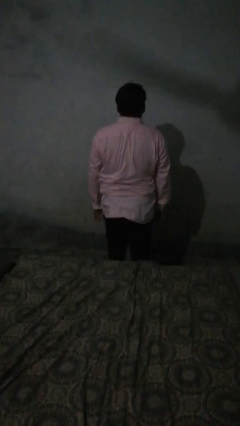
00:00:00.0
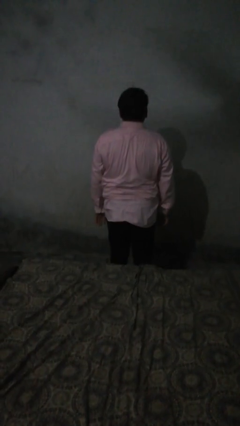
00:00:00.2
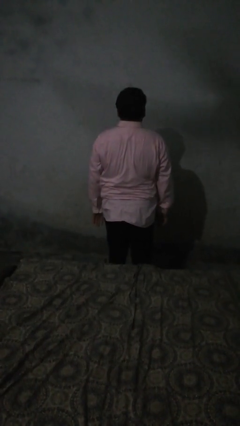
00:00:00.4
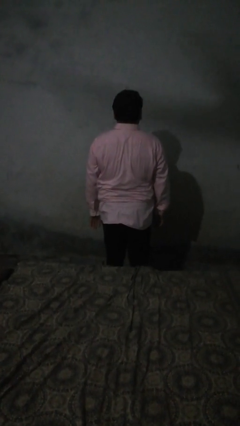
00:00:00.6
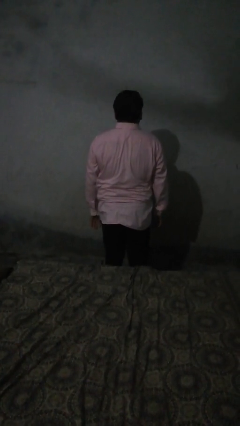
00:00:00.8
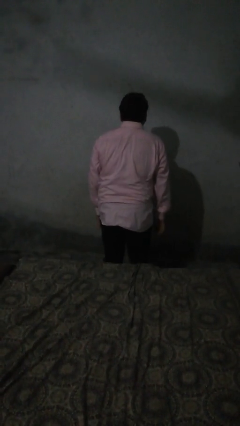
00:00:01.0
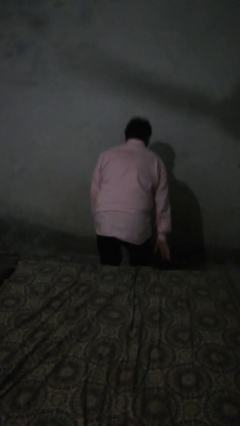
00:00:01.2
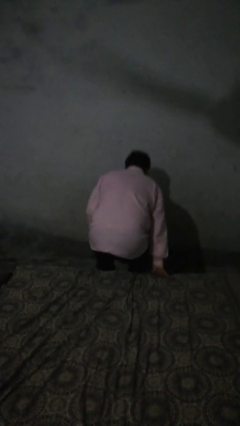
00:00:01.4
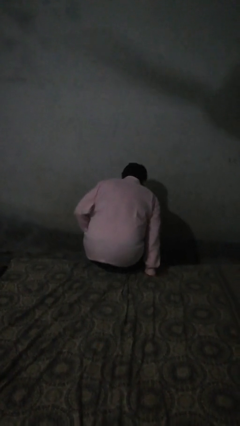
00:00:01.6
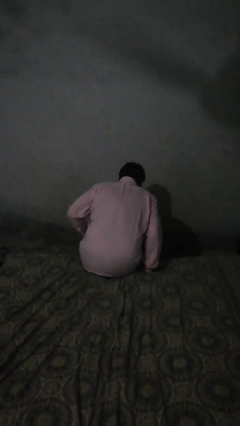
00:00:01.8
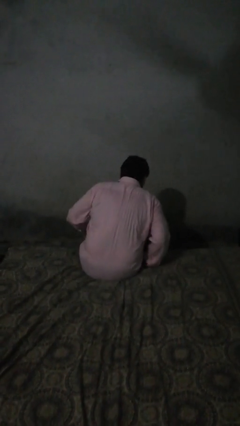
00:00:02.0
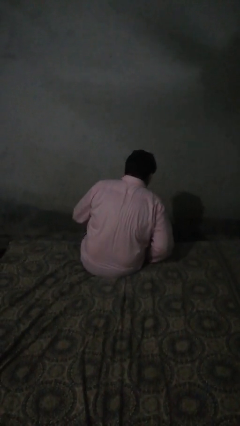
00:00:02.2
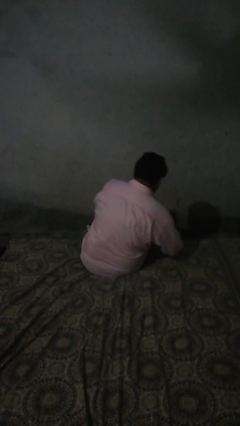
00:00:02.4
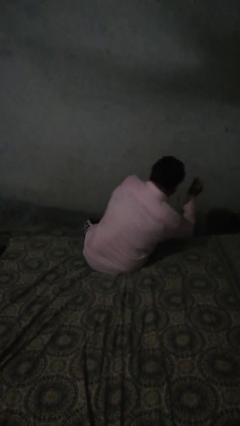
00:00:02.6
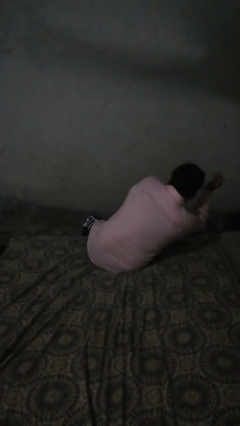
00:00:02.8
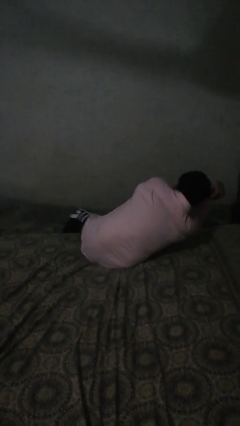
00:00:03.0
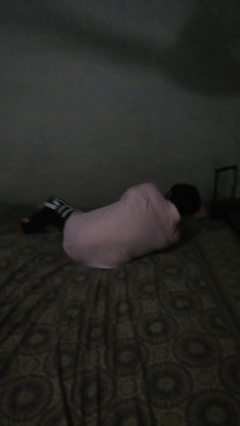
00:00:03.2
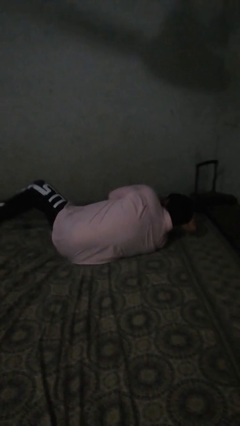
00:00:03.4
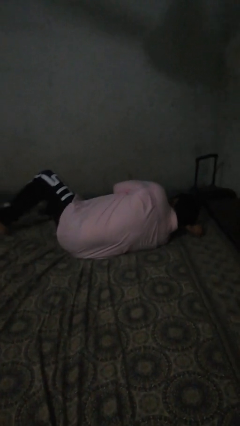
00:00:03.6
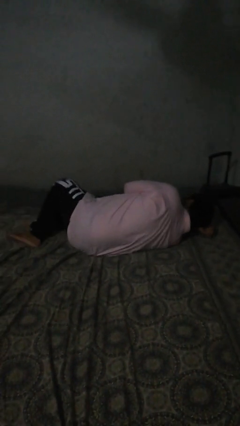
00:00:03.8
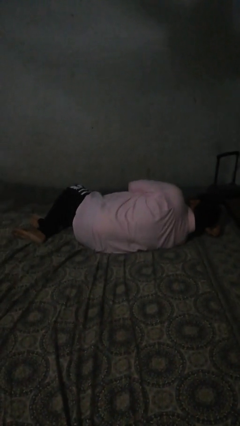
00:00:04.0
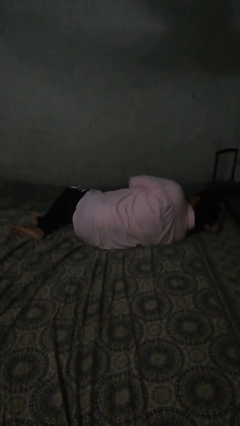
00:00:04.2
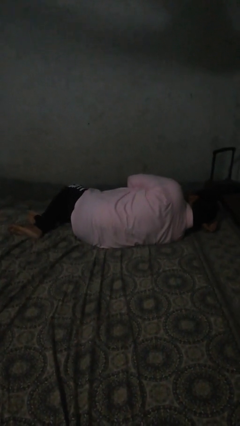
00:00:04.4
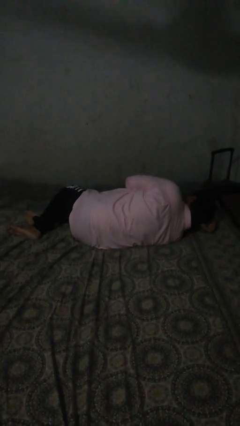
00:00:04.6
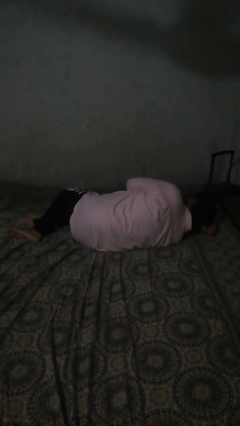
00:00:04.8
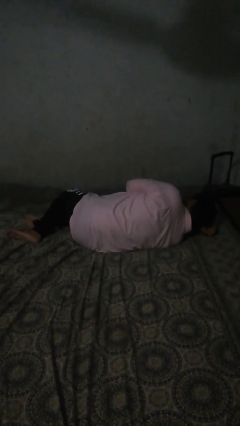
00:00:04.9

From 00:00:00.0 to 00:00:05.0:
person lies down on bed

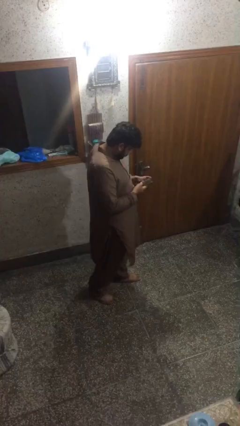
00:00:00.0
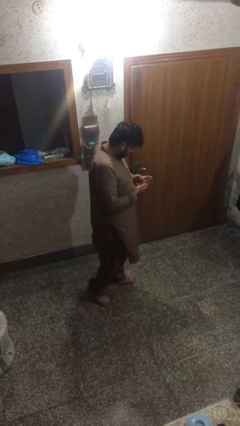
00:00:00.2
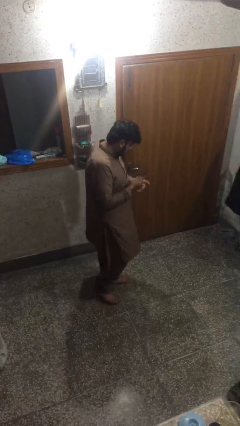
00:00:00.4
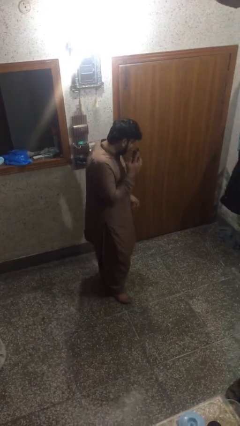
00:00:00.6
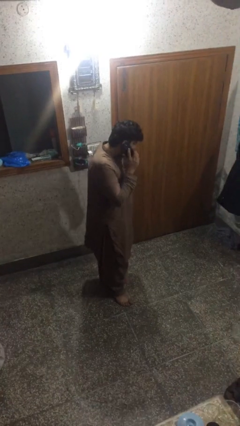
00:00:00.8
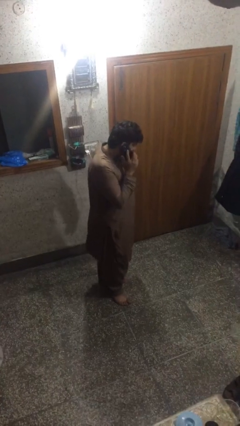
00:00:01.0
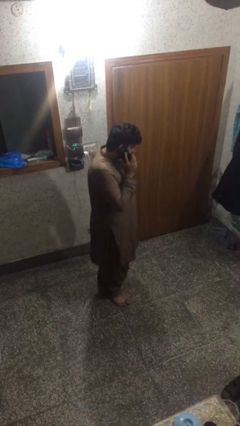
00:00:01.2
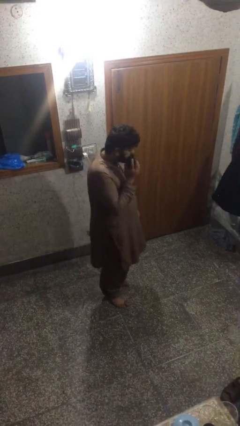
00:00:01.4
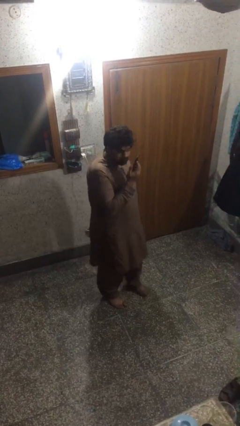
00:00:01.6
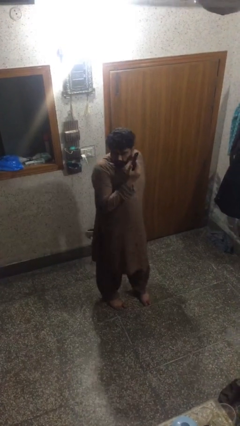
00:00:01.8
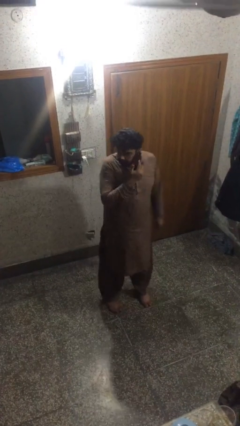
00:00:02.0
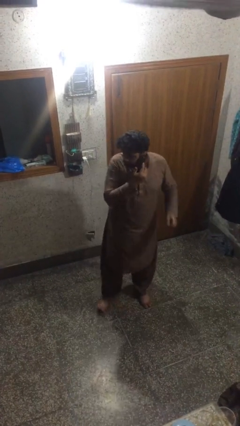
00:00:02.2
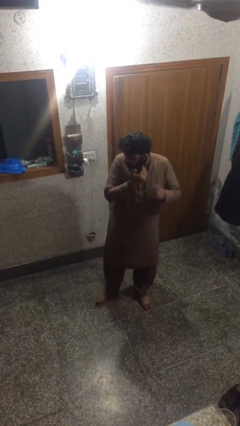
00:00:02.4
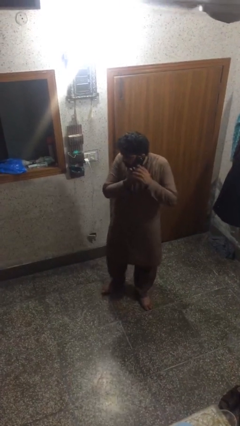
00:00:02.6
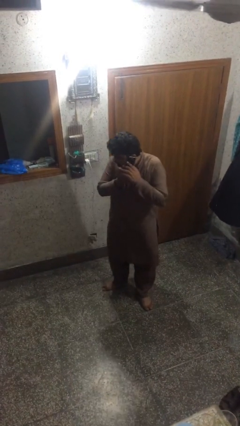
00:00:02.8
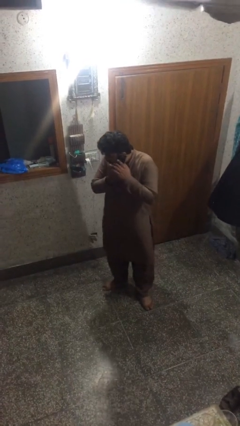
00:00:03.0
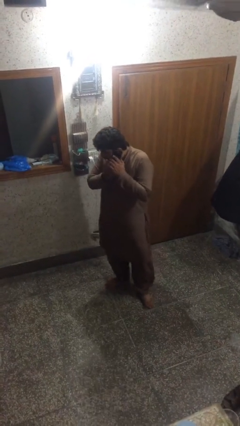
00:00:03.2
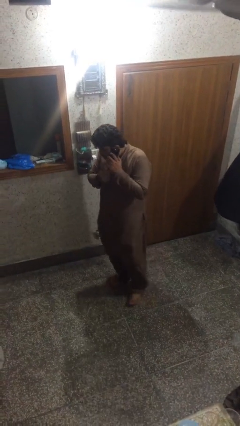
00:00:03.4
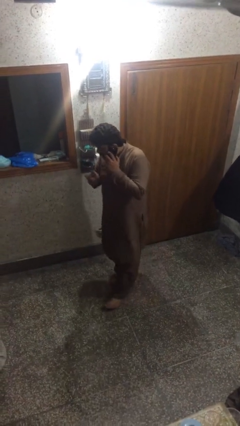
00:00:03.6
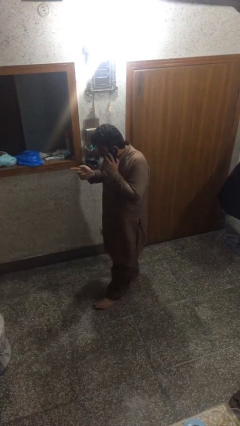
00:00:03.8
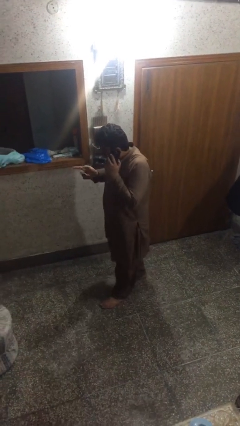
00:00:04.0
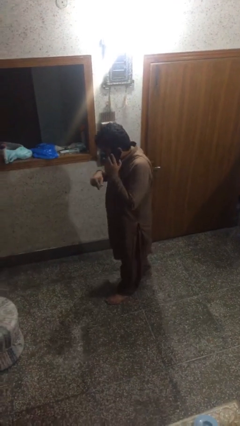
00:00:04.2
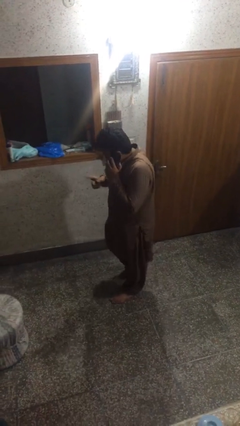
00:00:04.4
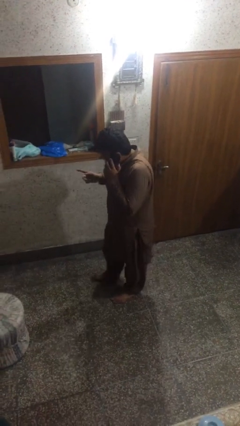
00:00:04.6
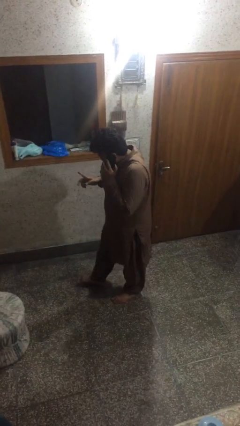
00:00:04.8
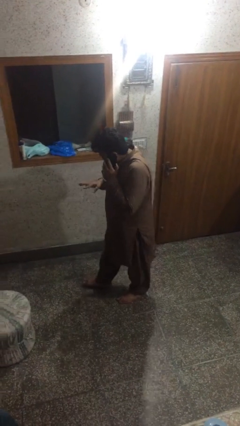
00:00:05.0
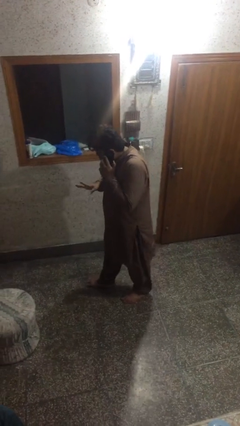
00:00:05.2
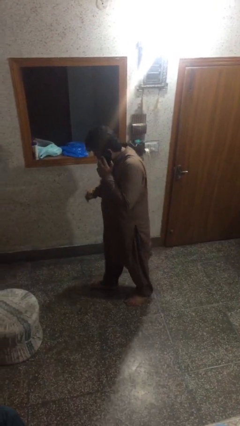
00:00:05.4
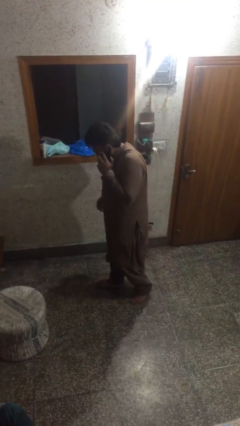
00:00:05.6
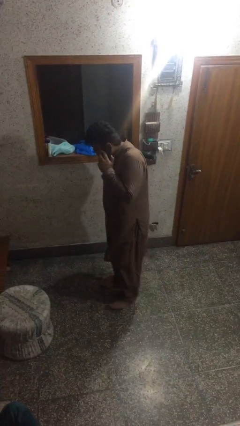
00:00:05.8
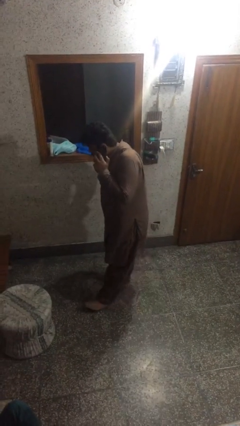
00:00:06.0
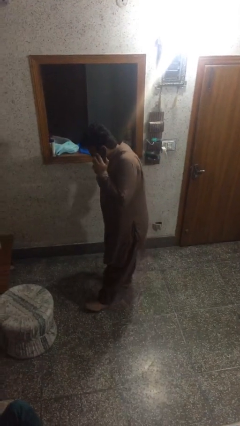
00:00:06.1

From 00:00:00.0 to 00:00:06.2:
person talks on phone

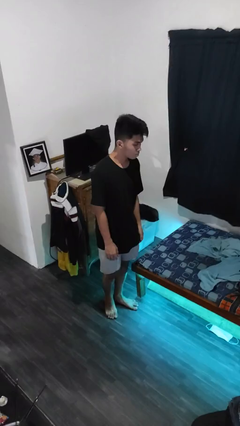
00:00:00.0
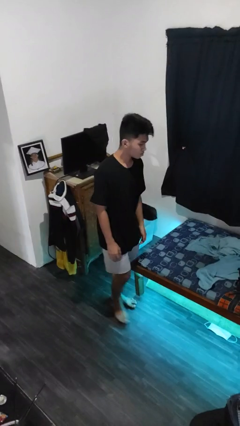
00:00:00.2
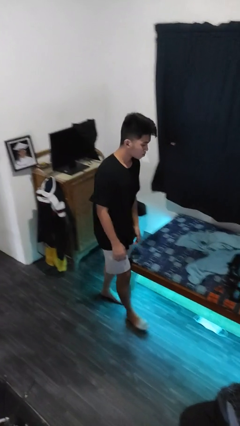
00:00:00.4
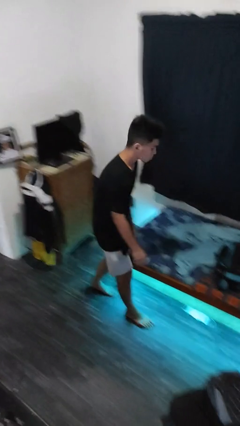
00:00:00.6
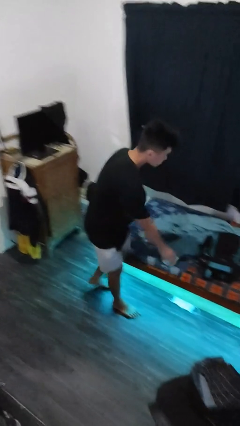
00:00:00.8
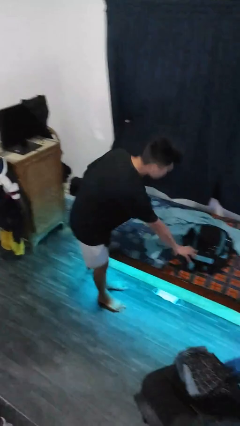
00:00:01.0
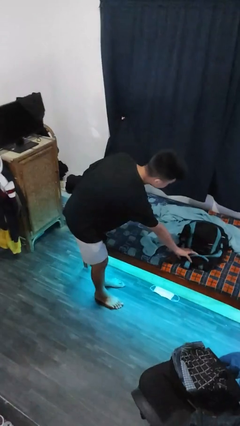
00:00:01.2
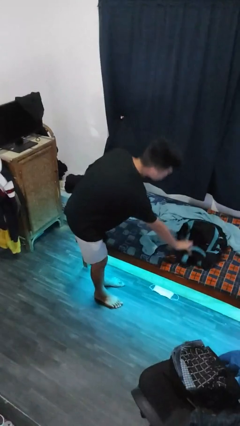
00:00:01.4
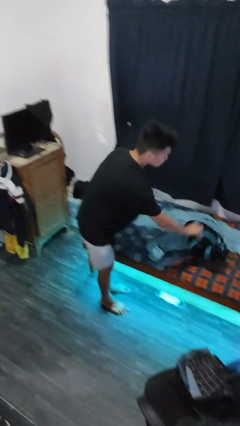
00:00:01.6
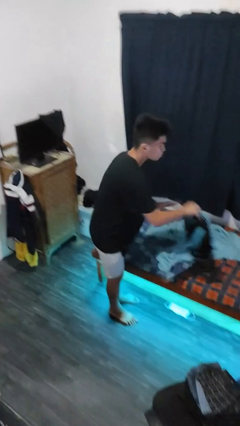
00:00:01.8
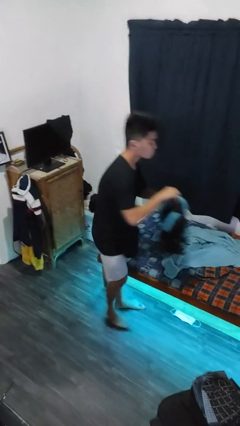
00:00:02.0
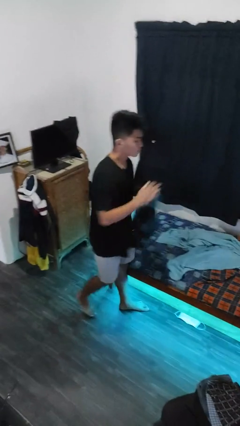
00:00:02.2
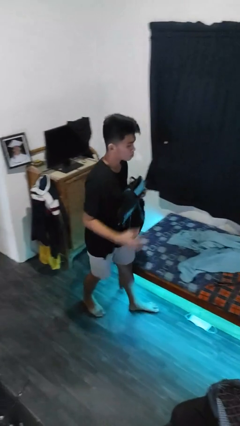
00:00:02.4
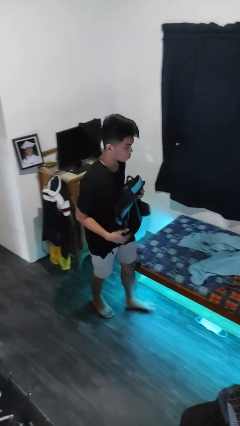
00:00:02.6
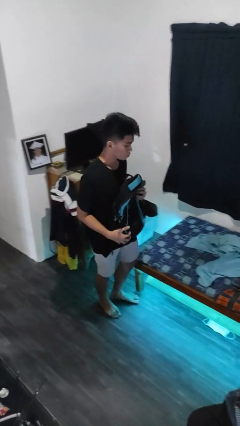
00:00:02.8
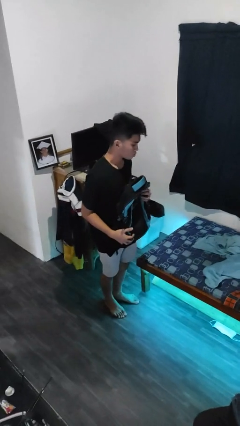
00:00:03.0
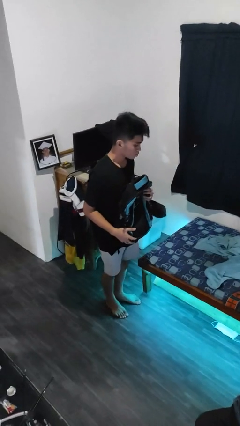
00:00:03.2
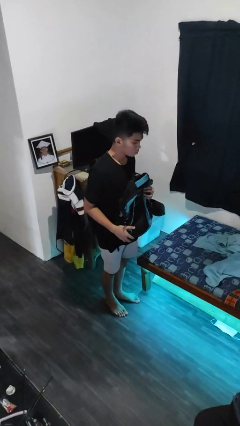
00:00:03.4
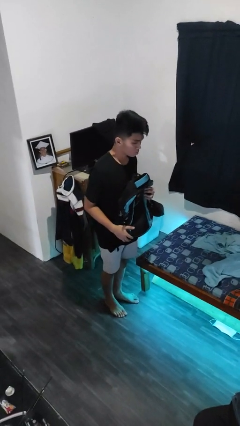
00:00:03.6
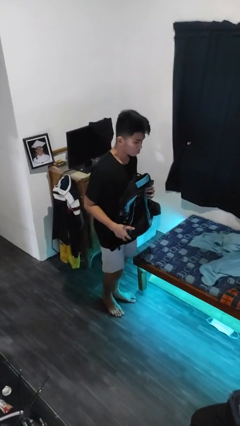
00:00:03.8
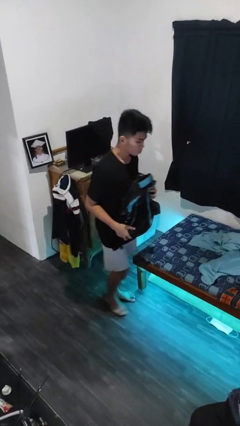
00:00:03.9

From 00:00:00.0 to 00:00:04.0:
person picks up object from bed

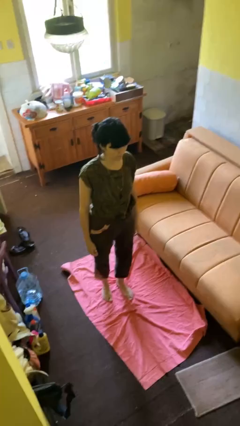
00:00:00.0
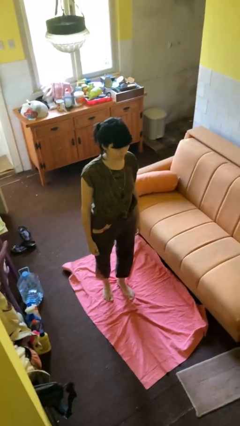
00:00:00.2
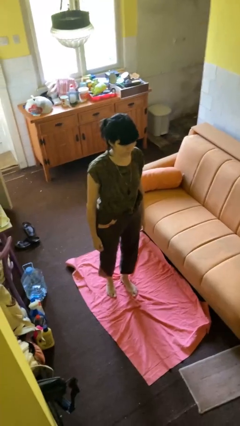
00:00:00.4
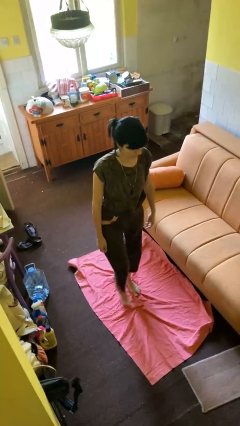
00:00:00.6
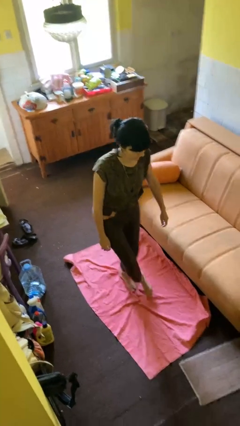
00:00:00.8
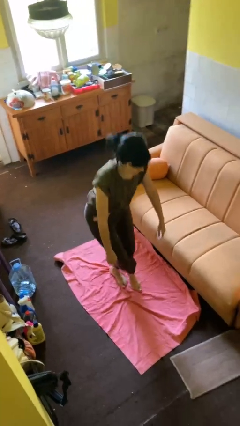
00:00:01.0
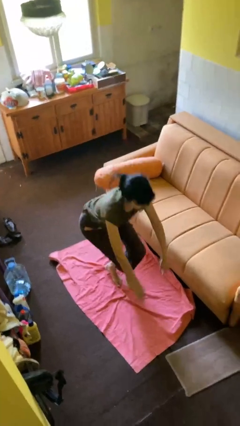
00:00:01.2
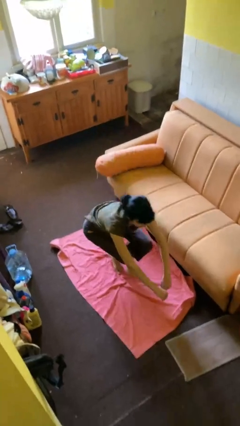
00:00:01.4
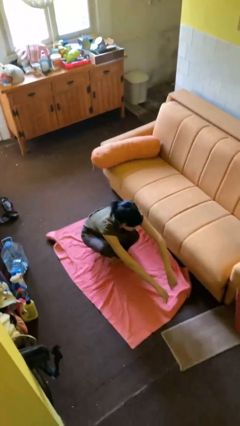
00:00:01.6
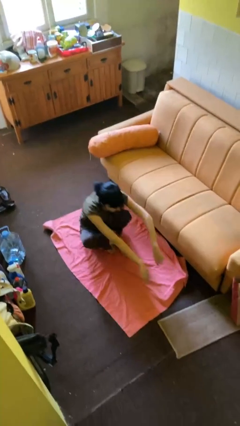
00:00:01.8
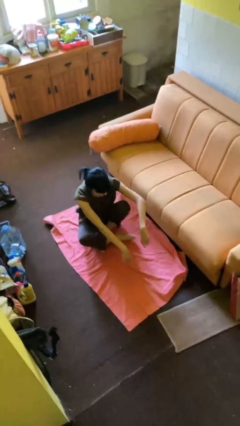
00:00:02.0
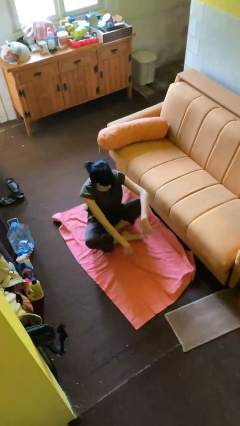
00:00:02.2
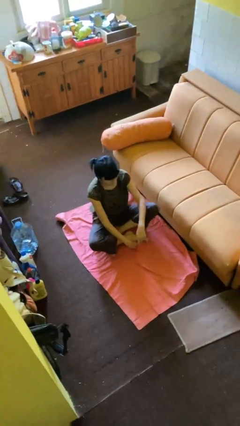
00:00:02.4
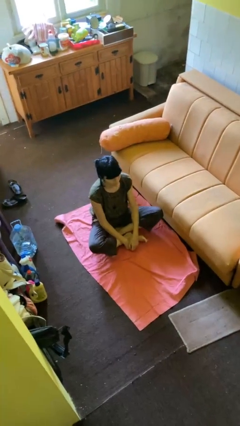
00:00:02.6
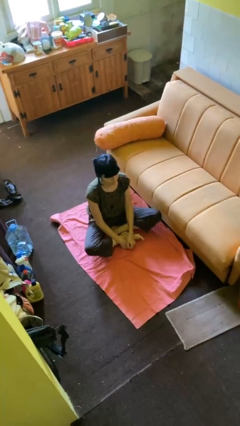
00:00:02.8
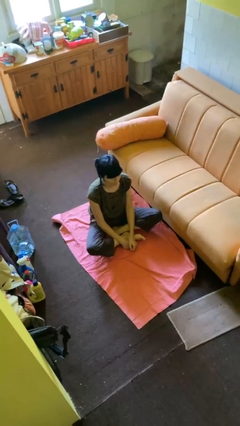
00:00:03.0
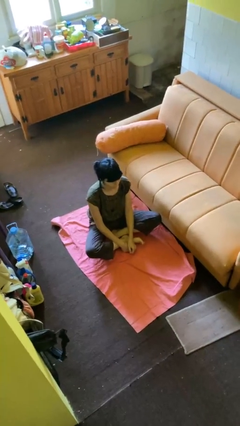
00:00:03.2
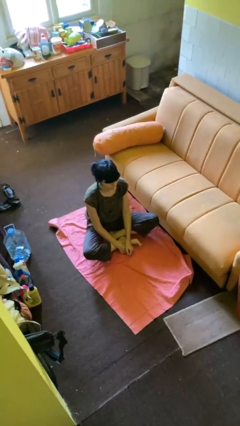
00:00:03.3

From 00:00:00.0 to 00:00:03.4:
person sits crisscross
